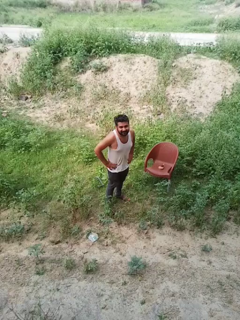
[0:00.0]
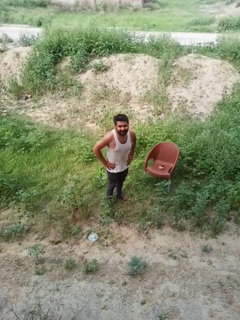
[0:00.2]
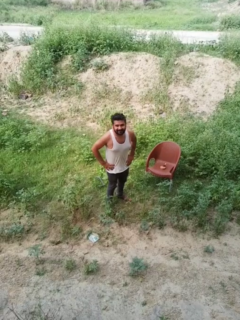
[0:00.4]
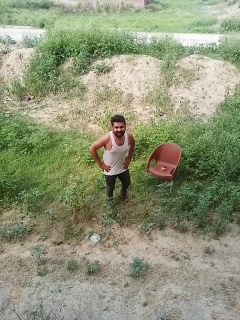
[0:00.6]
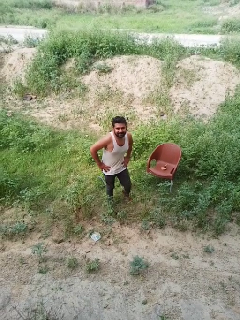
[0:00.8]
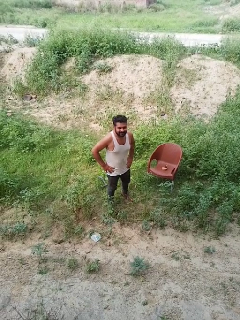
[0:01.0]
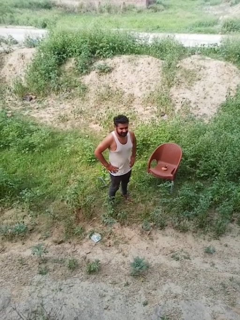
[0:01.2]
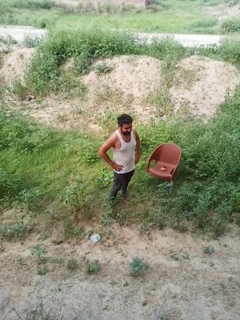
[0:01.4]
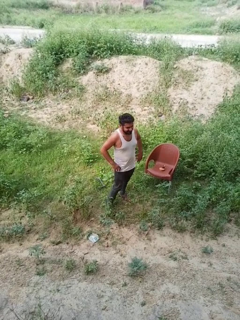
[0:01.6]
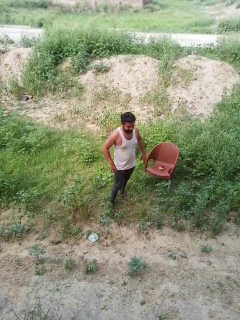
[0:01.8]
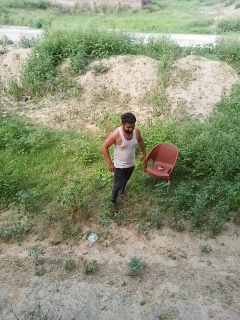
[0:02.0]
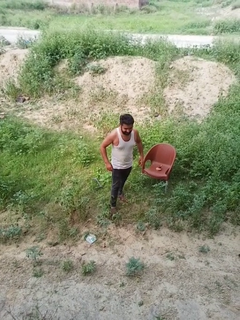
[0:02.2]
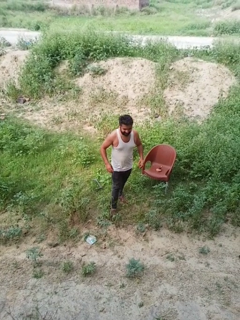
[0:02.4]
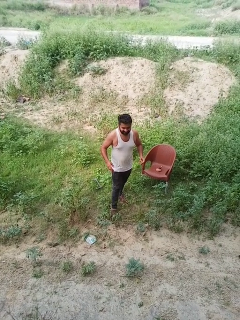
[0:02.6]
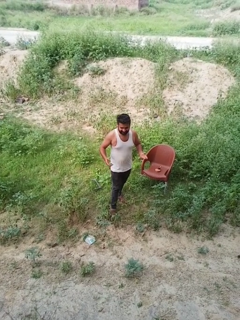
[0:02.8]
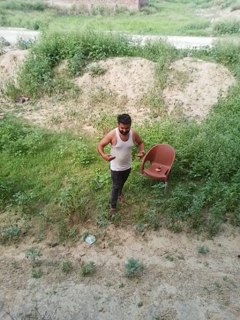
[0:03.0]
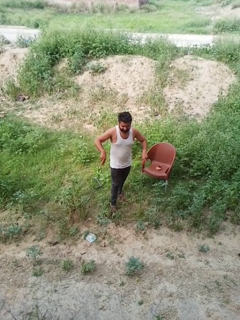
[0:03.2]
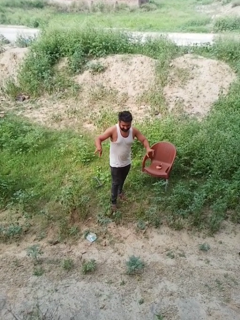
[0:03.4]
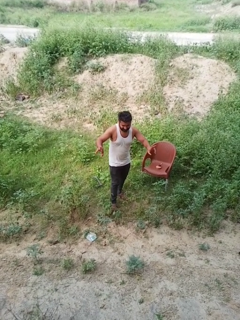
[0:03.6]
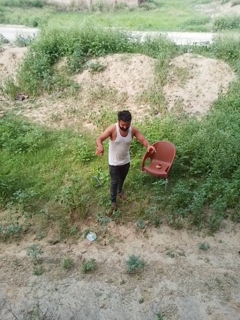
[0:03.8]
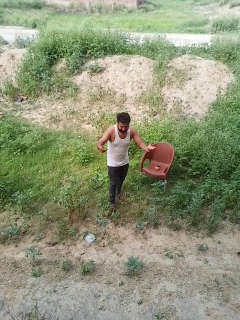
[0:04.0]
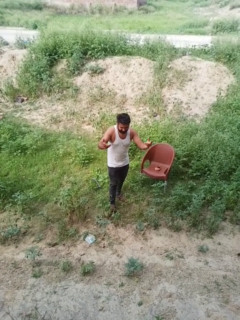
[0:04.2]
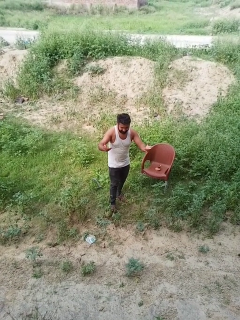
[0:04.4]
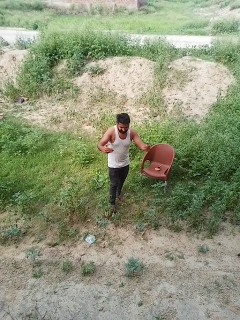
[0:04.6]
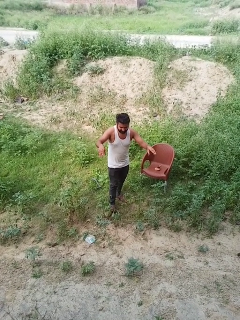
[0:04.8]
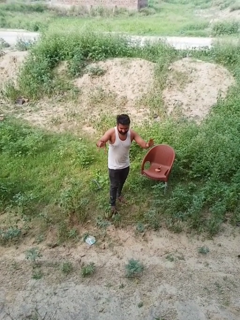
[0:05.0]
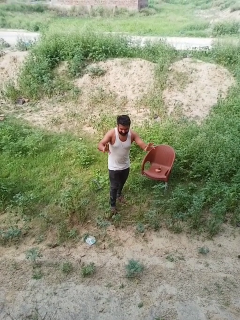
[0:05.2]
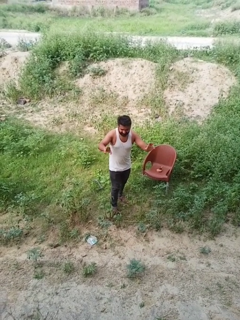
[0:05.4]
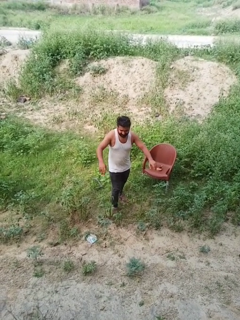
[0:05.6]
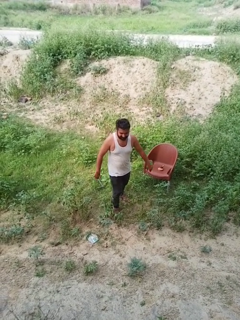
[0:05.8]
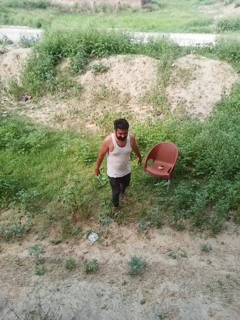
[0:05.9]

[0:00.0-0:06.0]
person dances in place

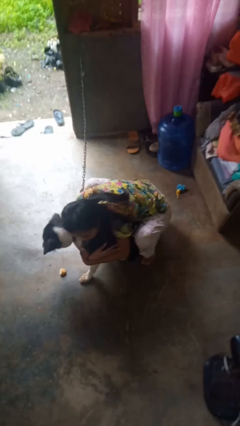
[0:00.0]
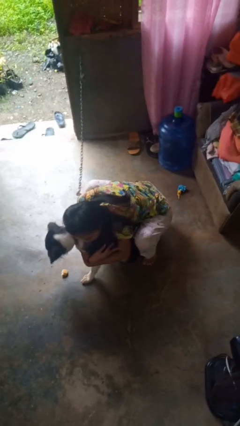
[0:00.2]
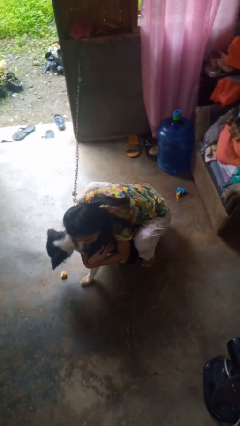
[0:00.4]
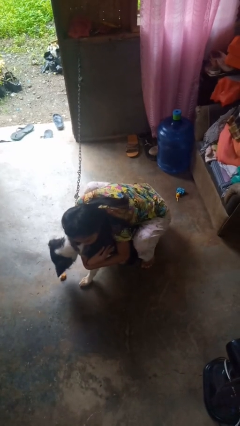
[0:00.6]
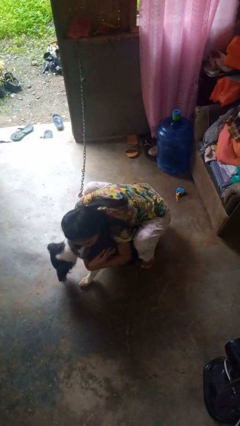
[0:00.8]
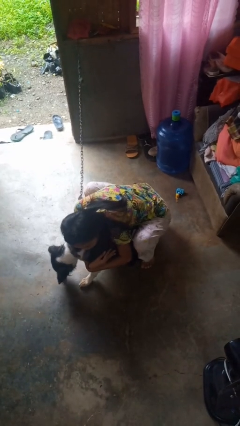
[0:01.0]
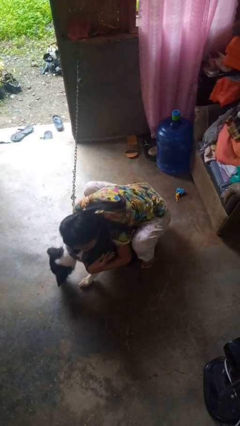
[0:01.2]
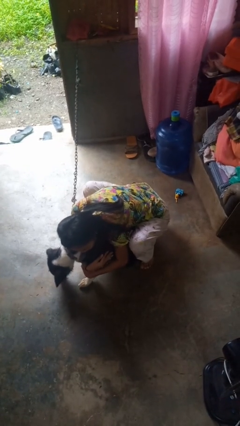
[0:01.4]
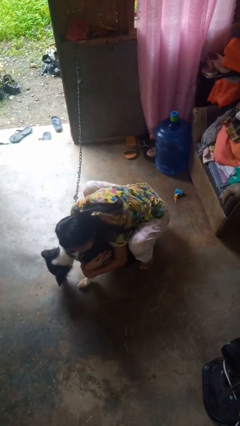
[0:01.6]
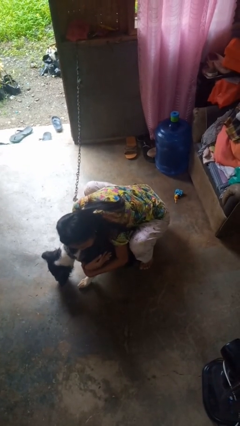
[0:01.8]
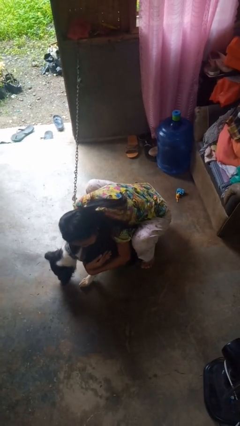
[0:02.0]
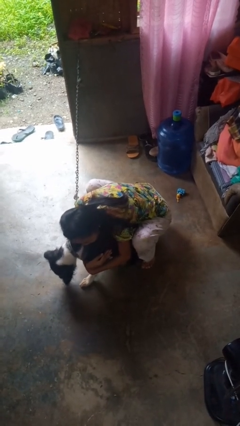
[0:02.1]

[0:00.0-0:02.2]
person hugs dog

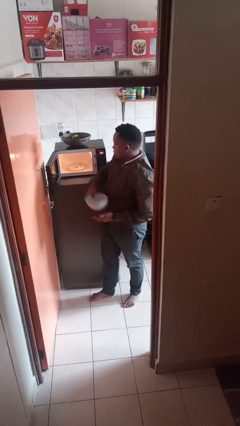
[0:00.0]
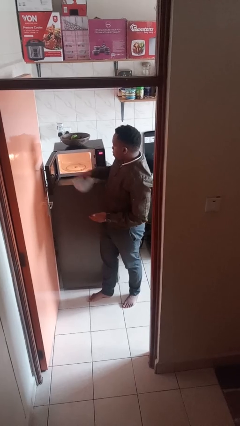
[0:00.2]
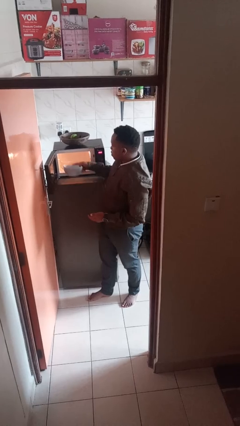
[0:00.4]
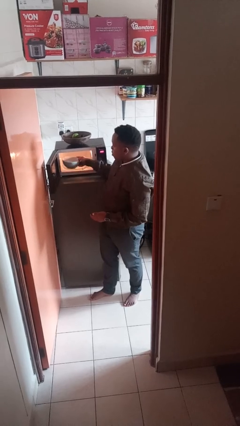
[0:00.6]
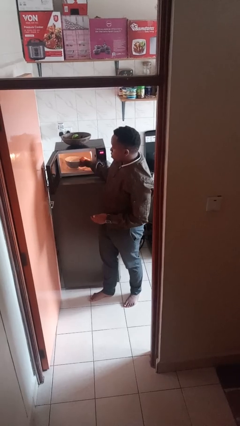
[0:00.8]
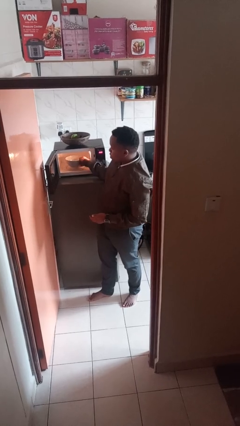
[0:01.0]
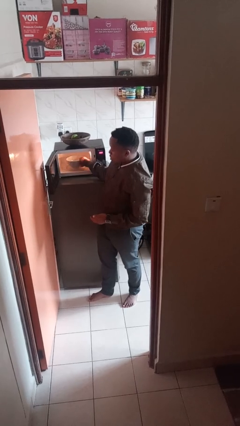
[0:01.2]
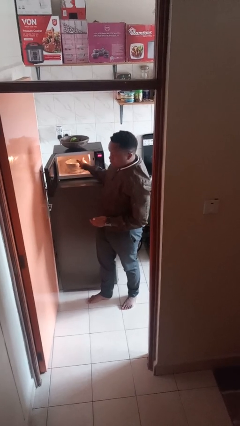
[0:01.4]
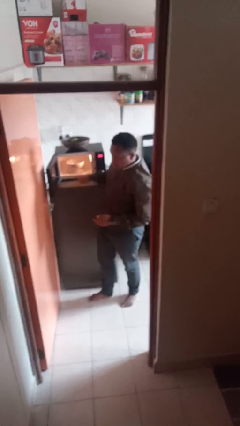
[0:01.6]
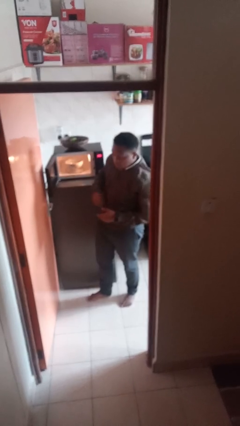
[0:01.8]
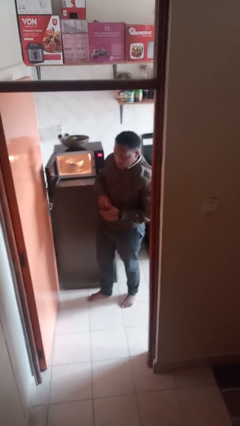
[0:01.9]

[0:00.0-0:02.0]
person puts object into microwave

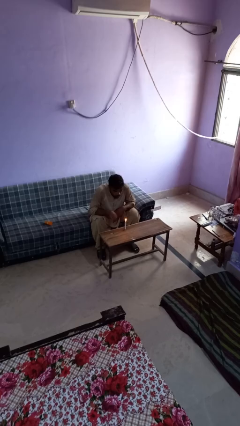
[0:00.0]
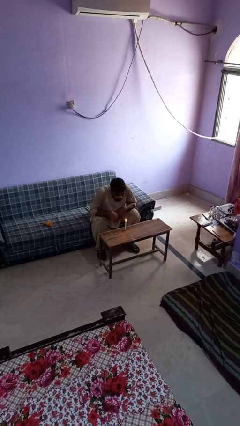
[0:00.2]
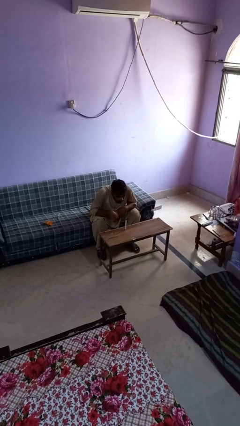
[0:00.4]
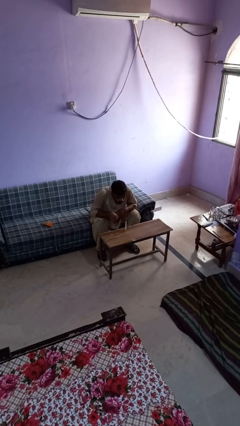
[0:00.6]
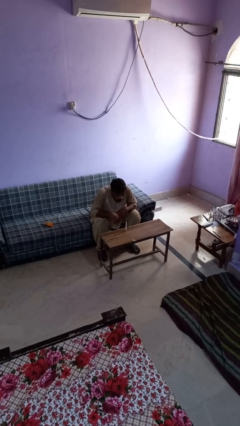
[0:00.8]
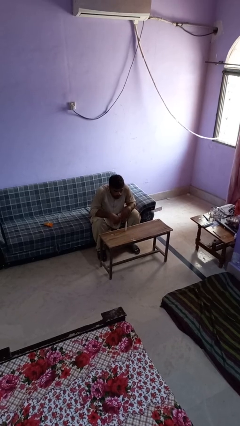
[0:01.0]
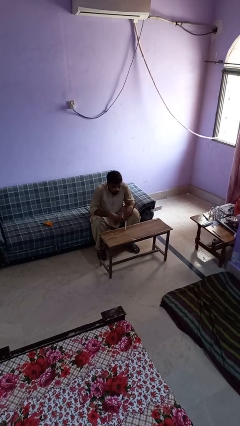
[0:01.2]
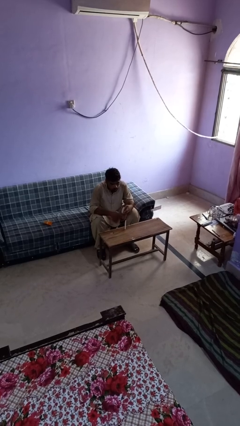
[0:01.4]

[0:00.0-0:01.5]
person extinguishes candle

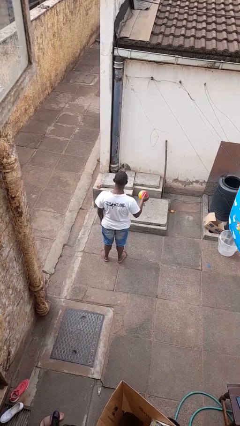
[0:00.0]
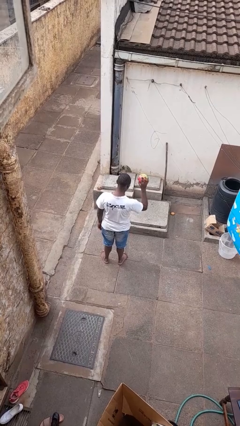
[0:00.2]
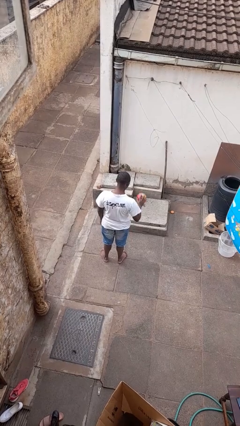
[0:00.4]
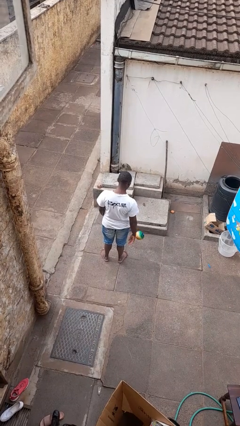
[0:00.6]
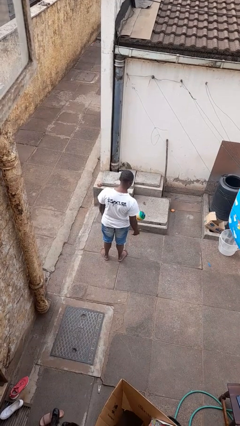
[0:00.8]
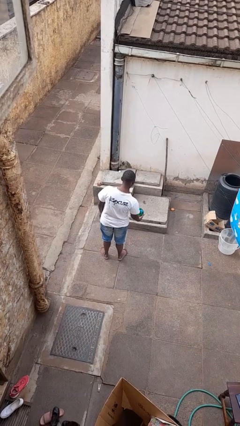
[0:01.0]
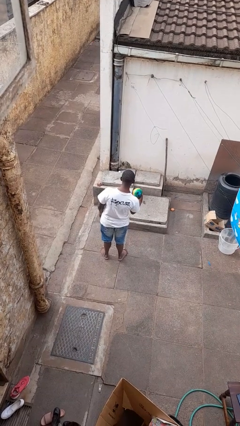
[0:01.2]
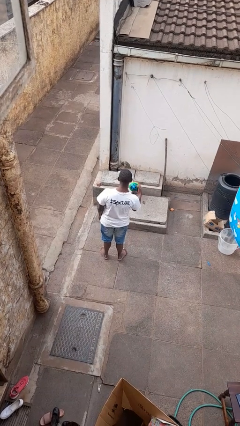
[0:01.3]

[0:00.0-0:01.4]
person bounces ball on floor

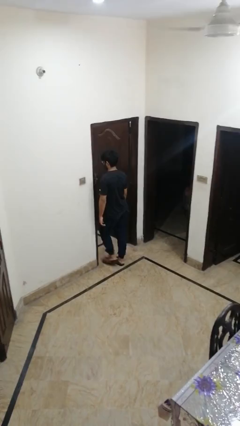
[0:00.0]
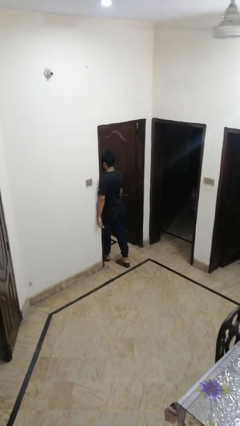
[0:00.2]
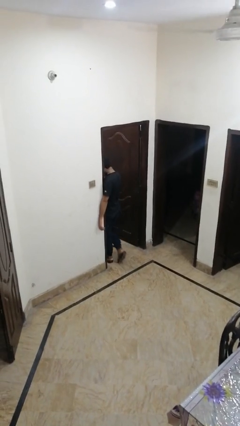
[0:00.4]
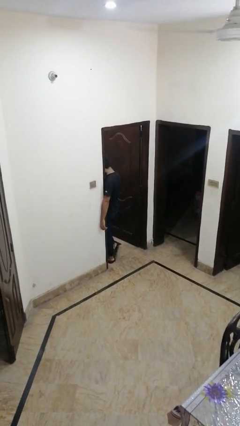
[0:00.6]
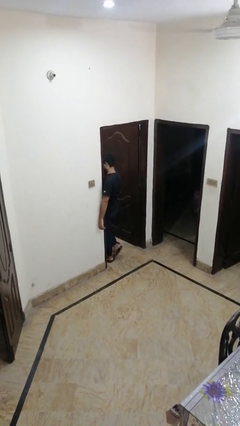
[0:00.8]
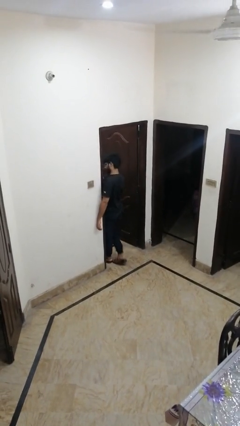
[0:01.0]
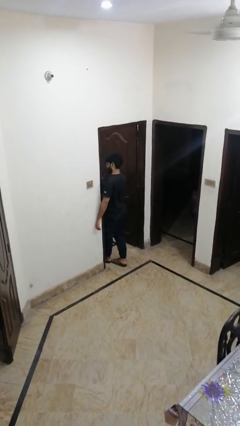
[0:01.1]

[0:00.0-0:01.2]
person bumps into wall

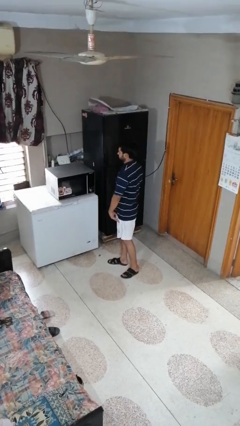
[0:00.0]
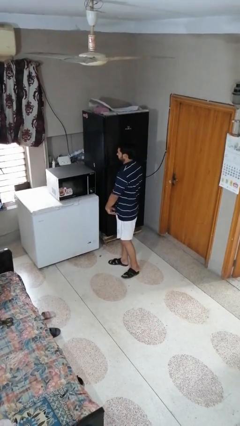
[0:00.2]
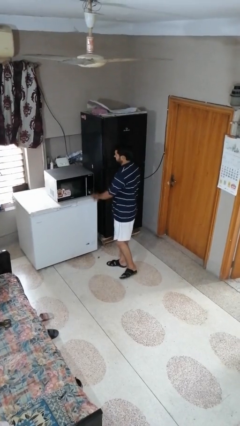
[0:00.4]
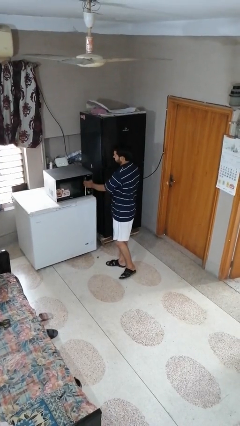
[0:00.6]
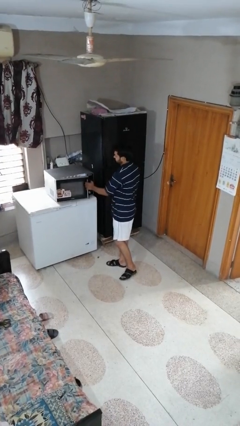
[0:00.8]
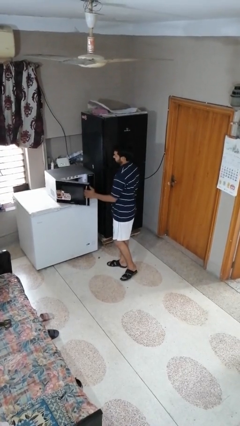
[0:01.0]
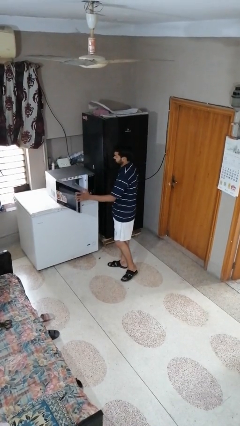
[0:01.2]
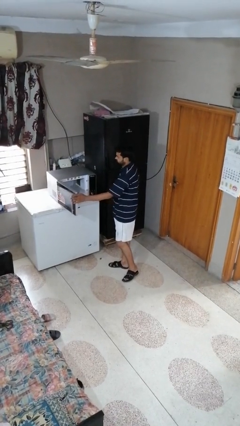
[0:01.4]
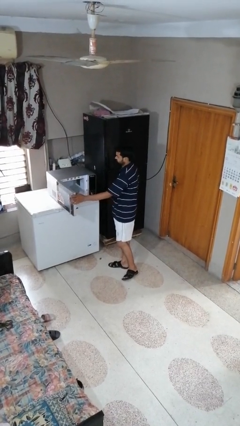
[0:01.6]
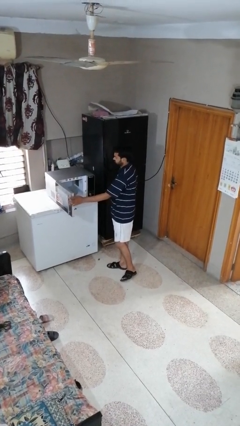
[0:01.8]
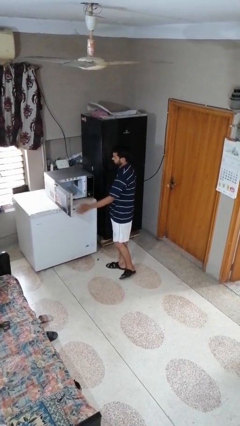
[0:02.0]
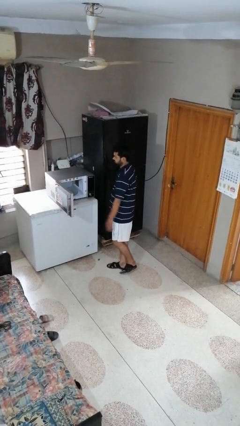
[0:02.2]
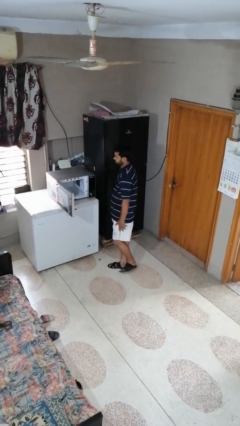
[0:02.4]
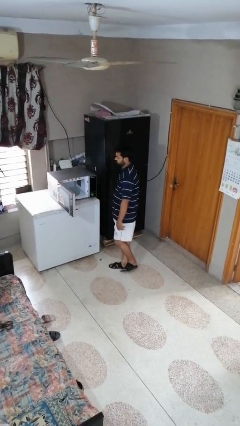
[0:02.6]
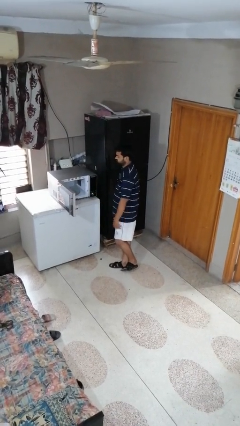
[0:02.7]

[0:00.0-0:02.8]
person opens microwave

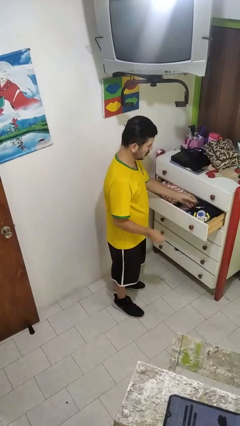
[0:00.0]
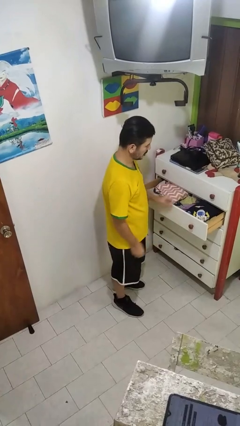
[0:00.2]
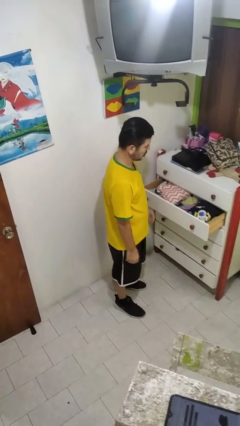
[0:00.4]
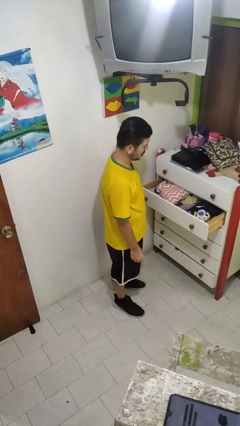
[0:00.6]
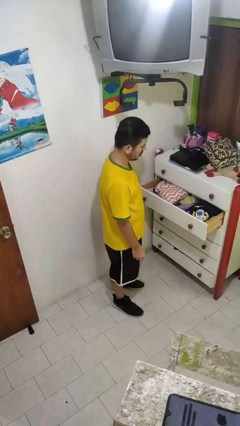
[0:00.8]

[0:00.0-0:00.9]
person puts clothes into dresser

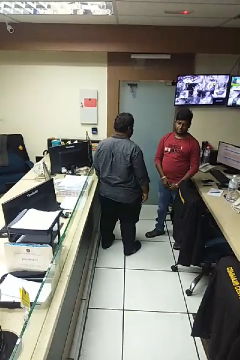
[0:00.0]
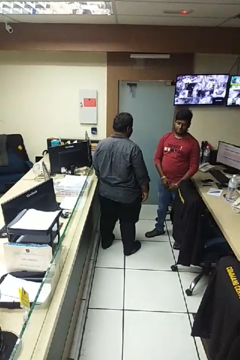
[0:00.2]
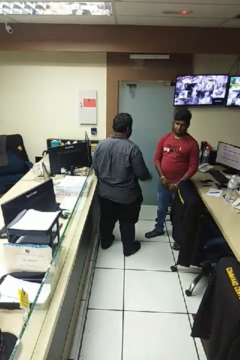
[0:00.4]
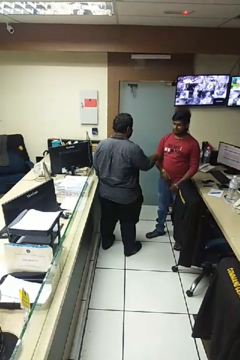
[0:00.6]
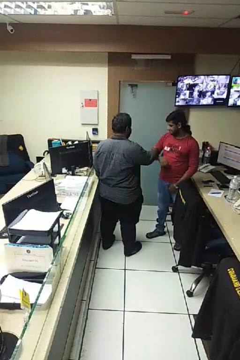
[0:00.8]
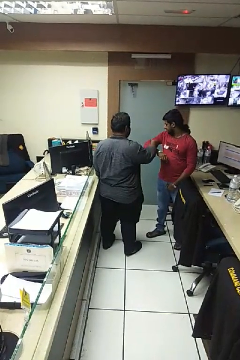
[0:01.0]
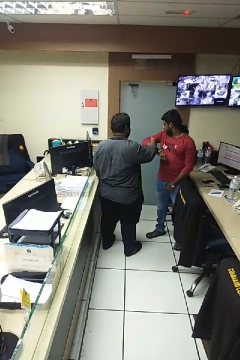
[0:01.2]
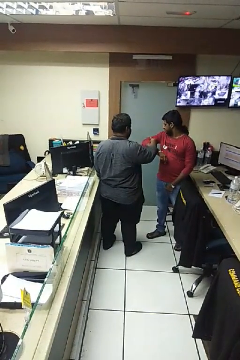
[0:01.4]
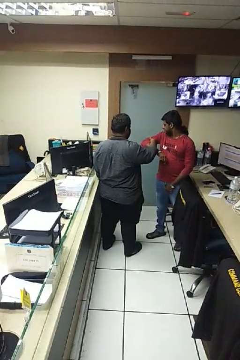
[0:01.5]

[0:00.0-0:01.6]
person grabs person by bicep
